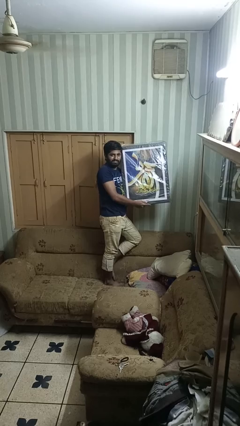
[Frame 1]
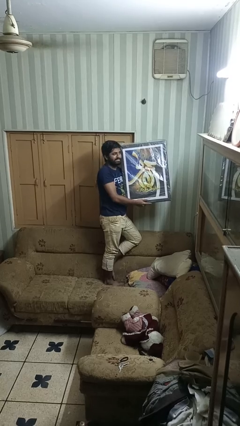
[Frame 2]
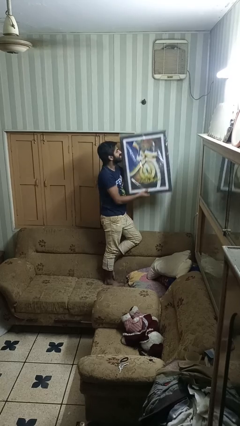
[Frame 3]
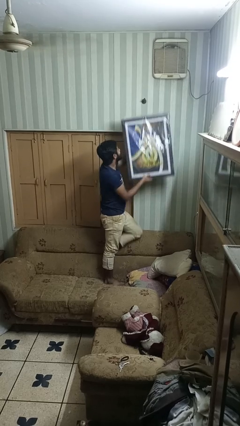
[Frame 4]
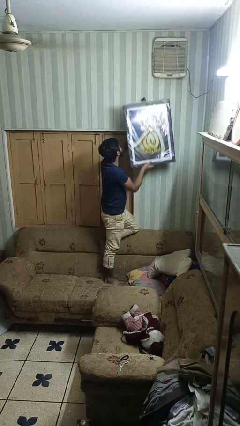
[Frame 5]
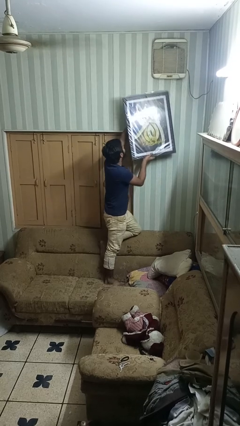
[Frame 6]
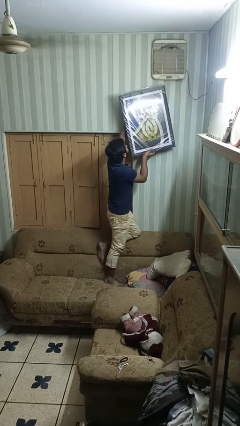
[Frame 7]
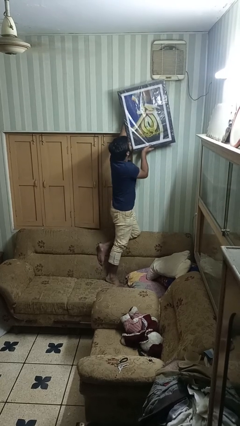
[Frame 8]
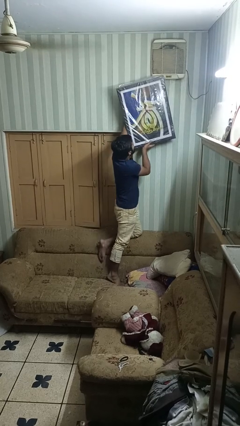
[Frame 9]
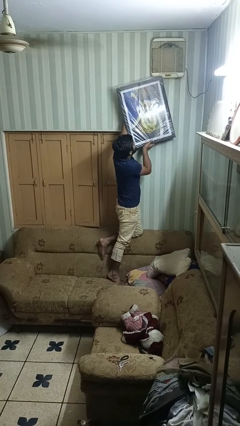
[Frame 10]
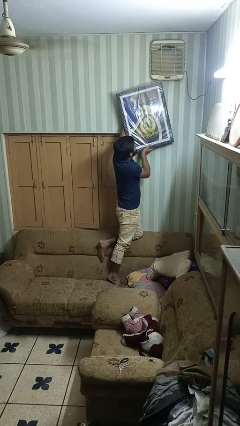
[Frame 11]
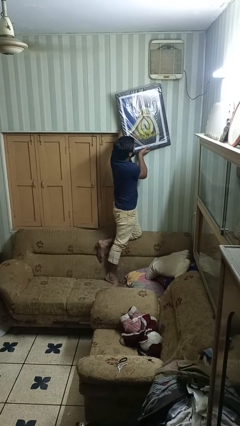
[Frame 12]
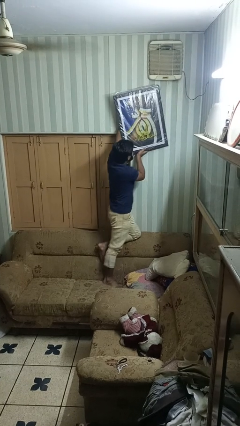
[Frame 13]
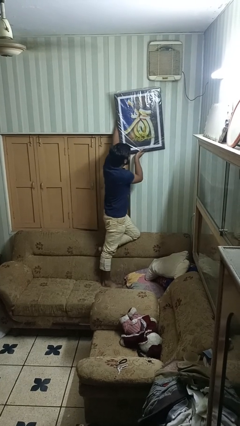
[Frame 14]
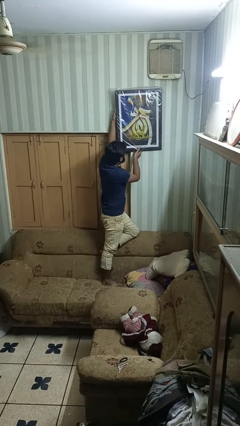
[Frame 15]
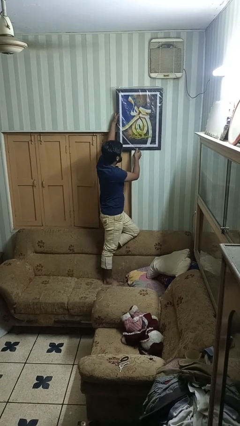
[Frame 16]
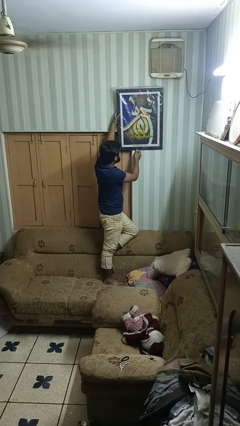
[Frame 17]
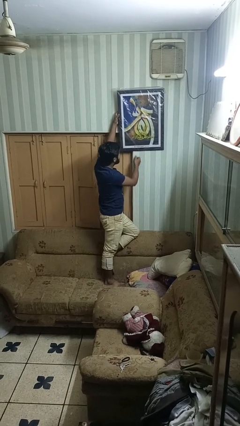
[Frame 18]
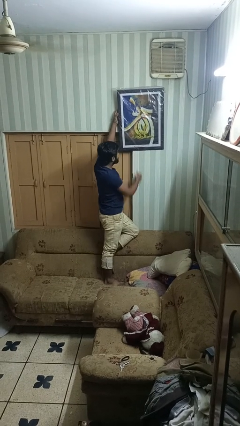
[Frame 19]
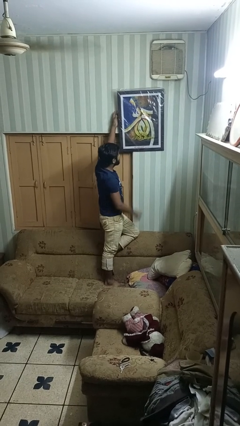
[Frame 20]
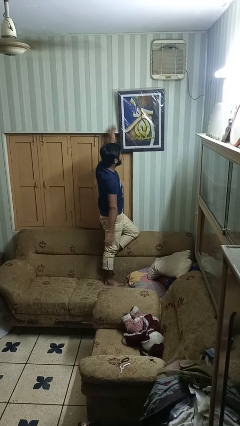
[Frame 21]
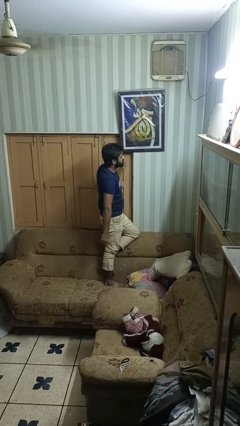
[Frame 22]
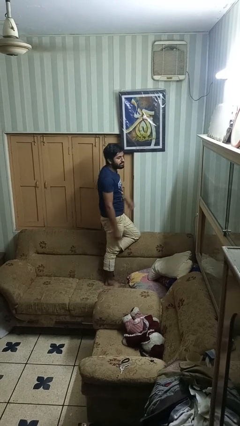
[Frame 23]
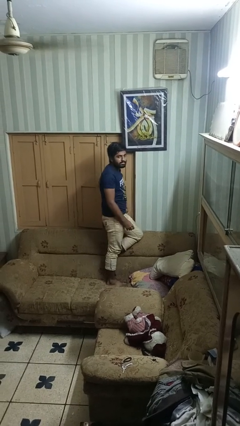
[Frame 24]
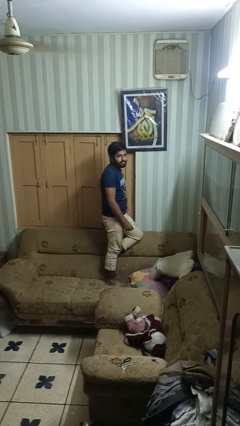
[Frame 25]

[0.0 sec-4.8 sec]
person puts up picture frame

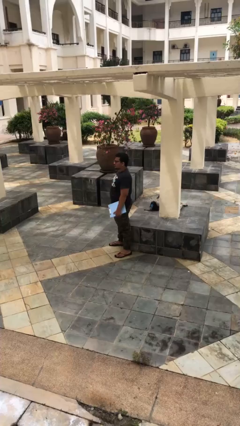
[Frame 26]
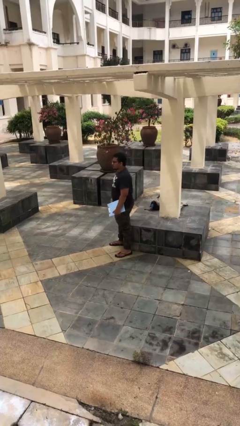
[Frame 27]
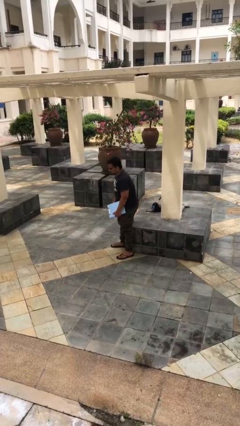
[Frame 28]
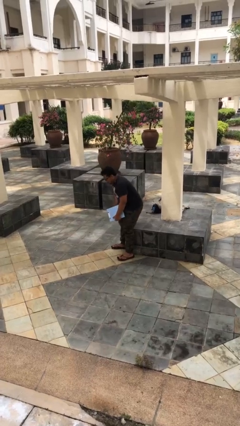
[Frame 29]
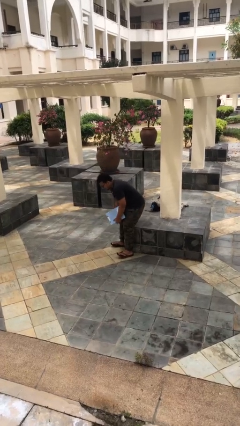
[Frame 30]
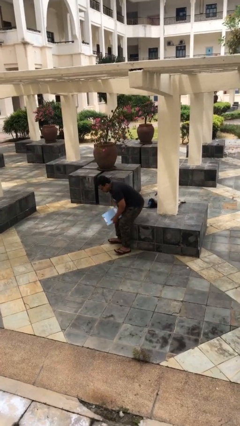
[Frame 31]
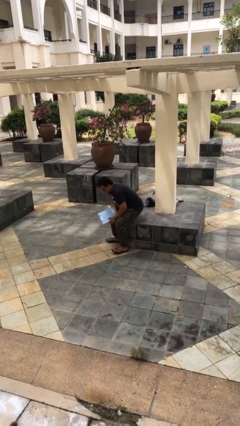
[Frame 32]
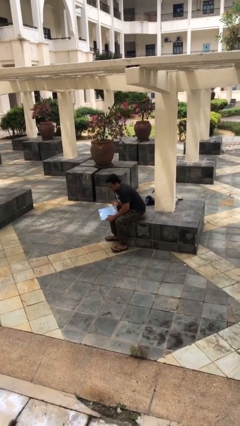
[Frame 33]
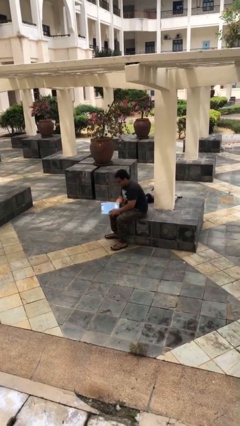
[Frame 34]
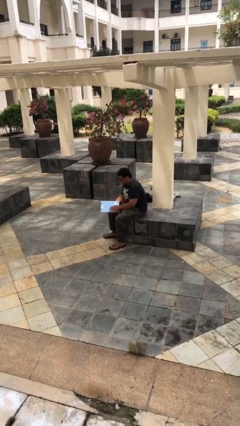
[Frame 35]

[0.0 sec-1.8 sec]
person sits down

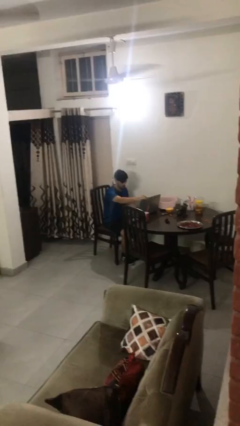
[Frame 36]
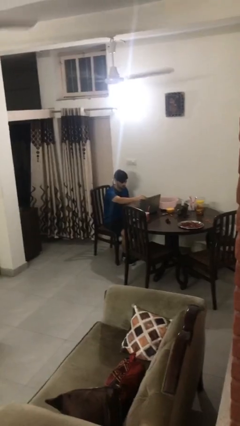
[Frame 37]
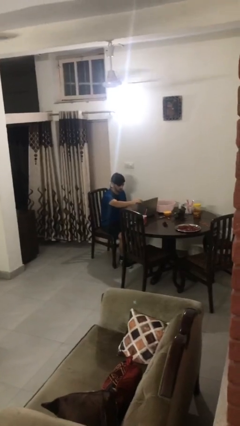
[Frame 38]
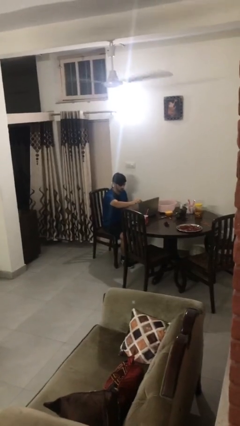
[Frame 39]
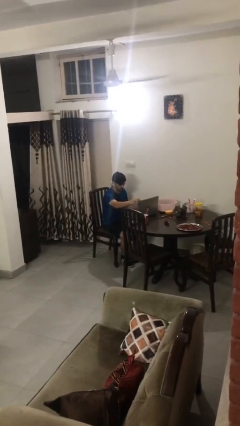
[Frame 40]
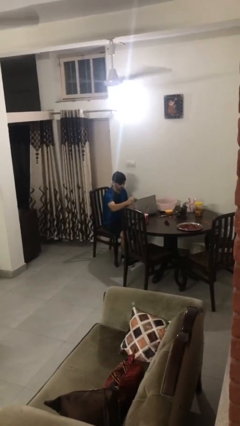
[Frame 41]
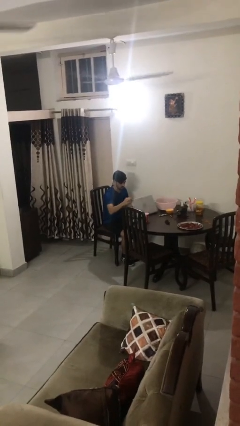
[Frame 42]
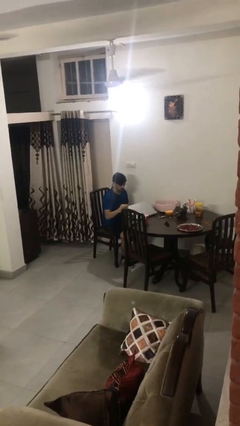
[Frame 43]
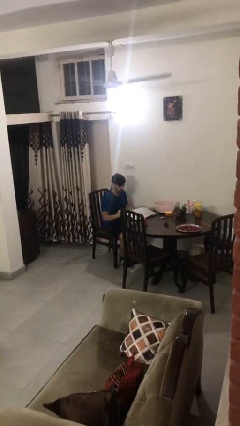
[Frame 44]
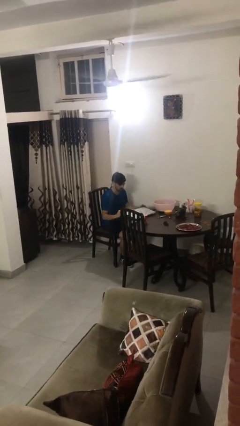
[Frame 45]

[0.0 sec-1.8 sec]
person closes laptop

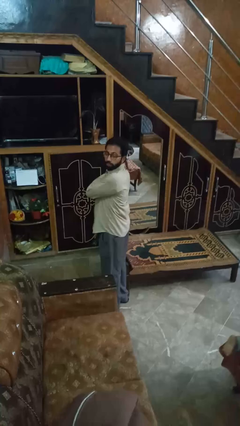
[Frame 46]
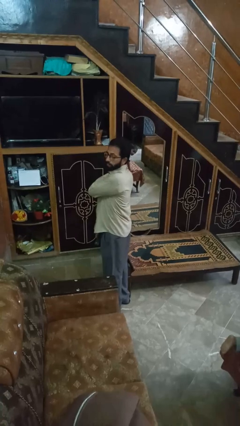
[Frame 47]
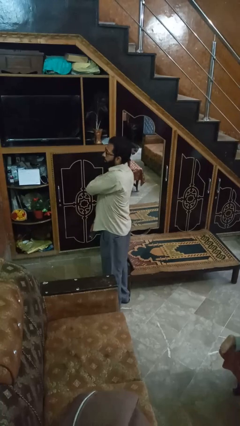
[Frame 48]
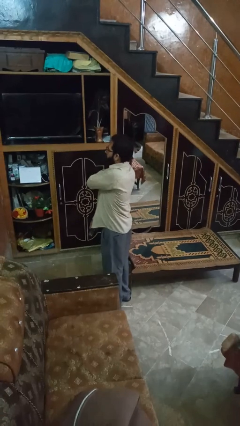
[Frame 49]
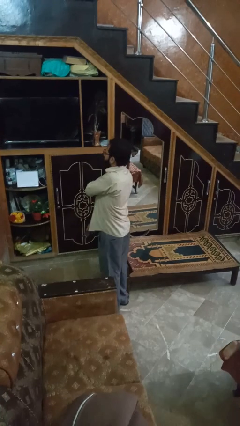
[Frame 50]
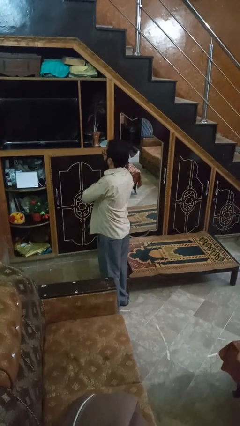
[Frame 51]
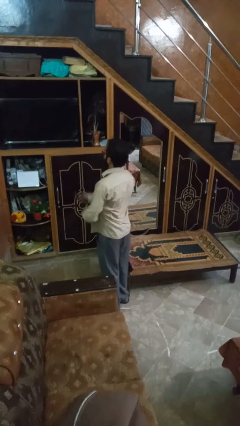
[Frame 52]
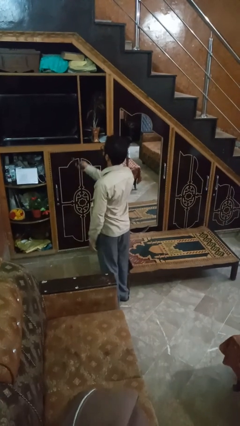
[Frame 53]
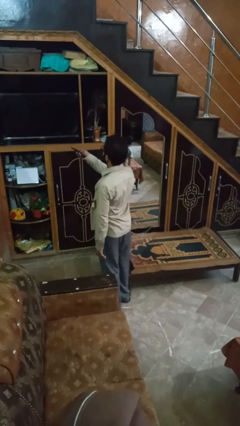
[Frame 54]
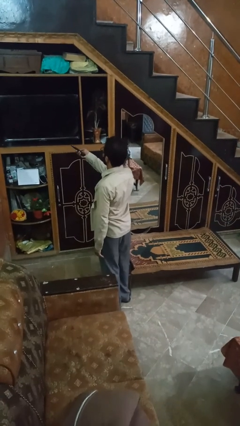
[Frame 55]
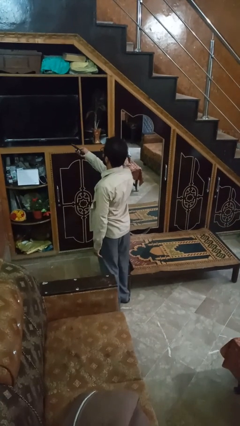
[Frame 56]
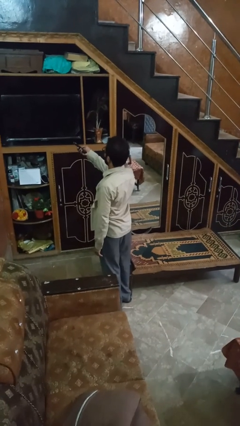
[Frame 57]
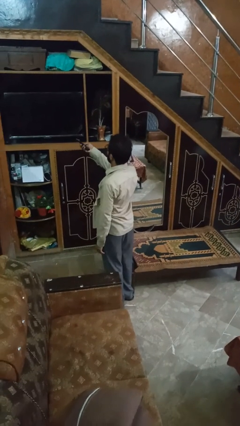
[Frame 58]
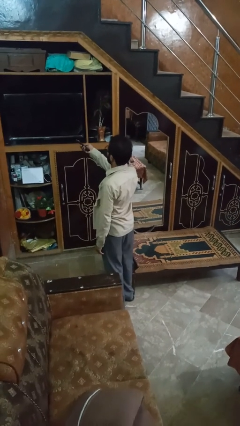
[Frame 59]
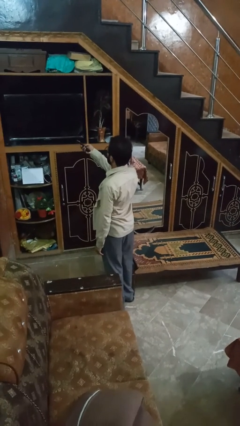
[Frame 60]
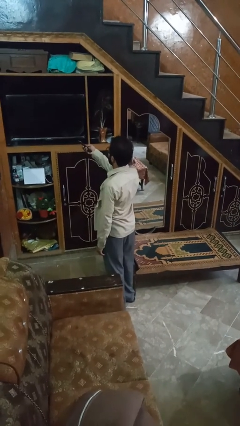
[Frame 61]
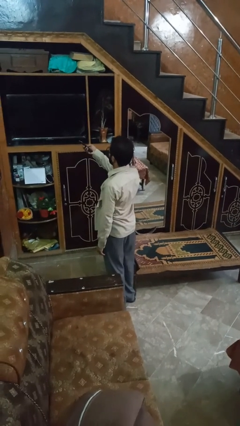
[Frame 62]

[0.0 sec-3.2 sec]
person uses television remote

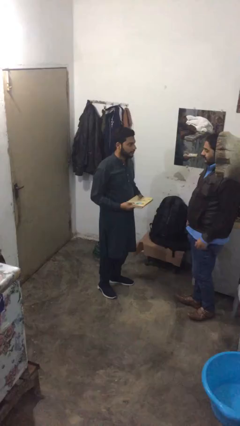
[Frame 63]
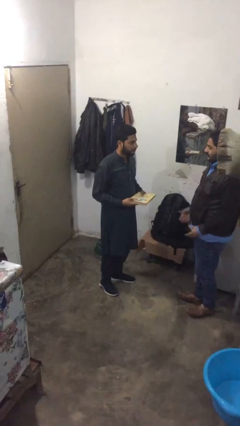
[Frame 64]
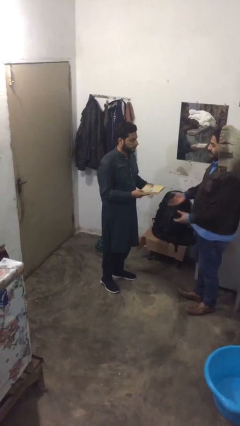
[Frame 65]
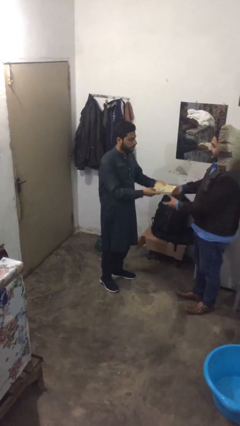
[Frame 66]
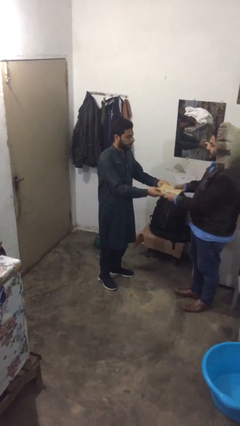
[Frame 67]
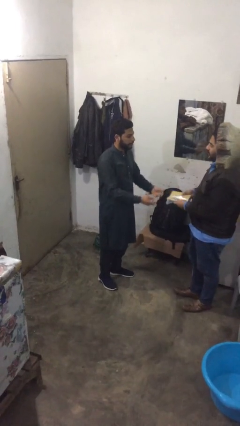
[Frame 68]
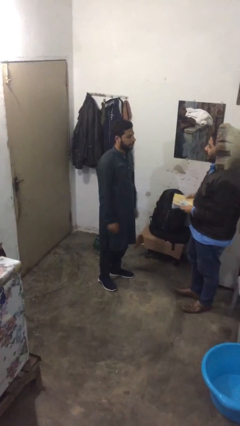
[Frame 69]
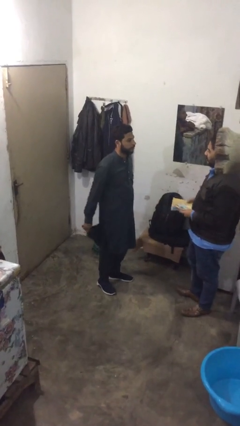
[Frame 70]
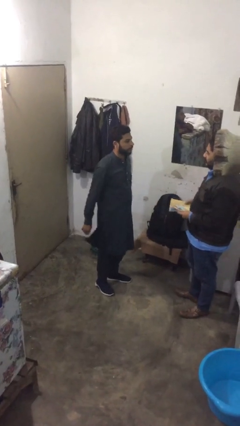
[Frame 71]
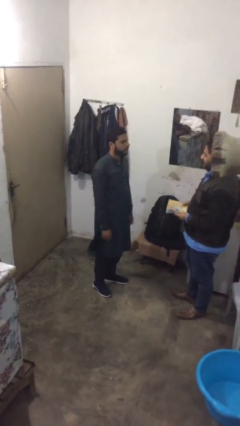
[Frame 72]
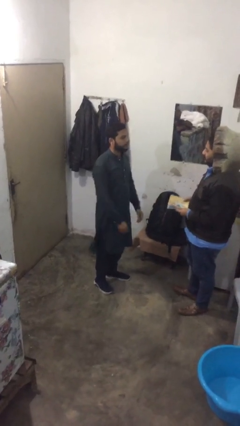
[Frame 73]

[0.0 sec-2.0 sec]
person transfers object to person

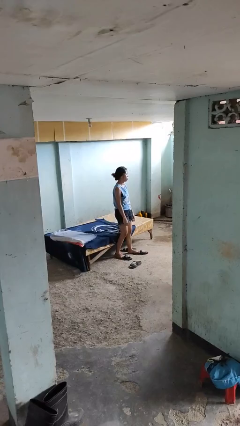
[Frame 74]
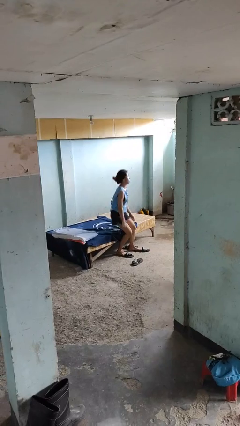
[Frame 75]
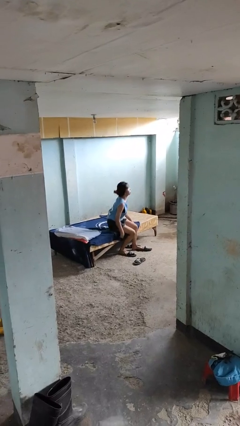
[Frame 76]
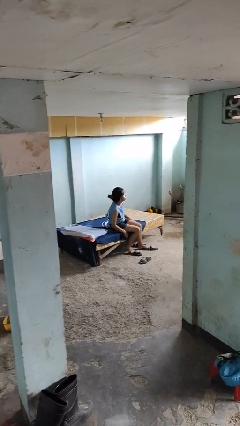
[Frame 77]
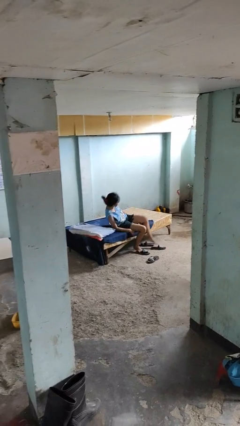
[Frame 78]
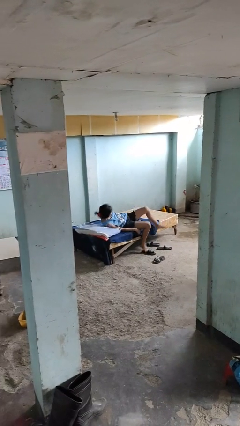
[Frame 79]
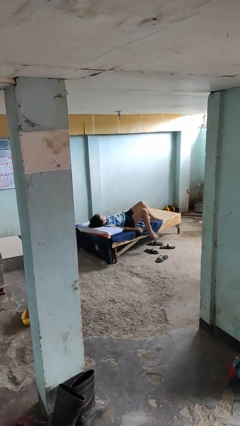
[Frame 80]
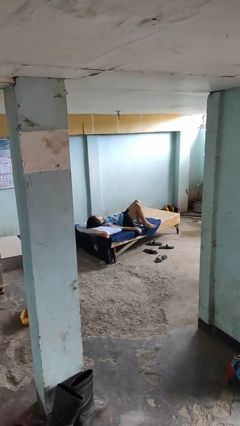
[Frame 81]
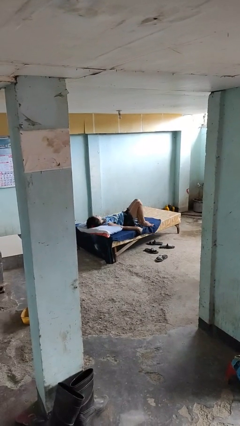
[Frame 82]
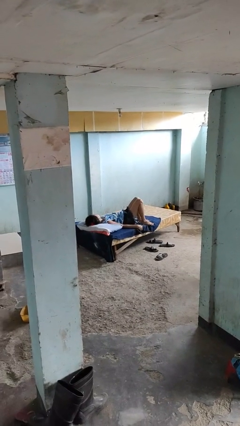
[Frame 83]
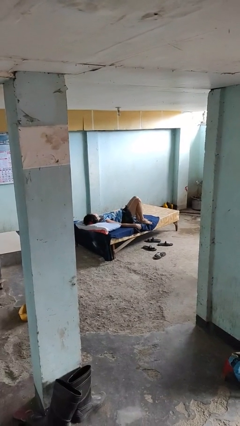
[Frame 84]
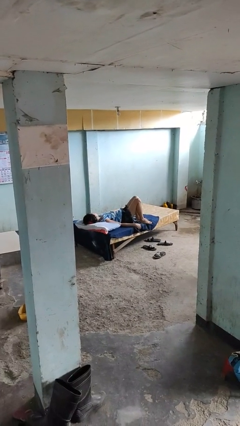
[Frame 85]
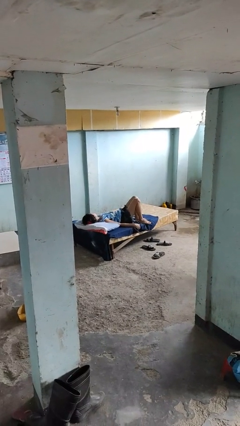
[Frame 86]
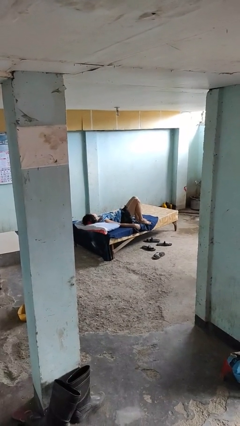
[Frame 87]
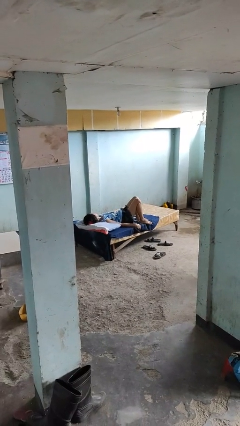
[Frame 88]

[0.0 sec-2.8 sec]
person lies down on bed

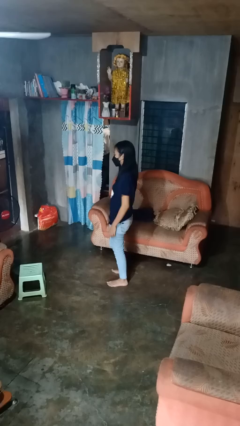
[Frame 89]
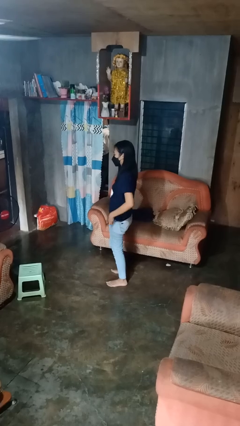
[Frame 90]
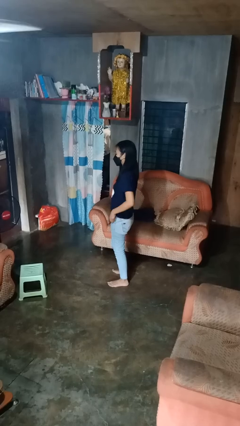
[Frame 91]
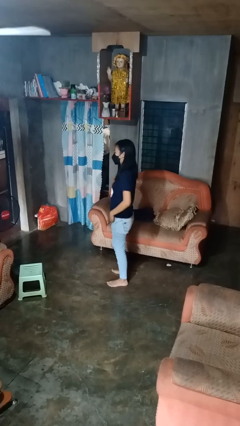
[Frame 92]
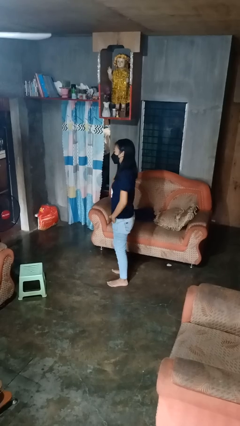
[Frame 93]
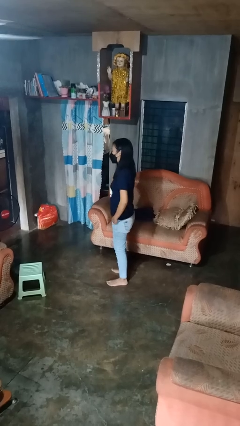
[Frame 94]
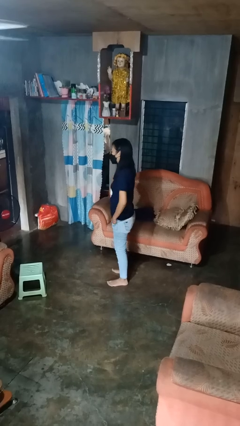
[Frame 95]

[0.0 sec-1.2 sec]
person puts hands in back pockets
